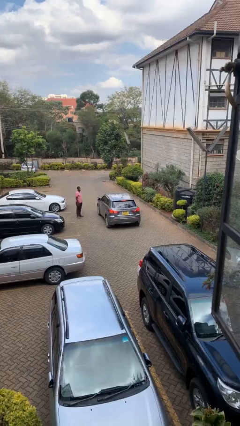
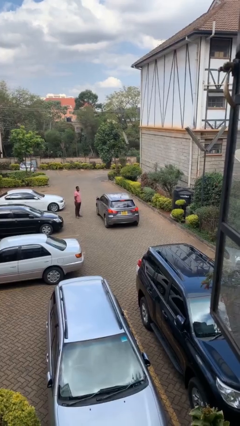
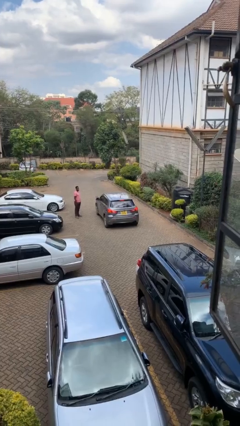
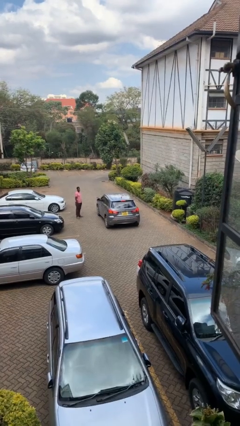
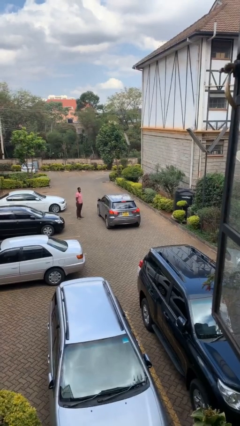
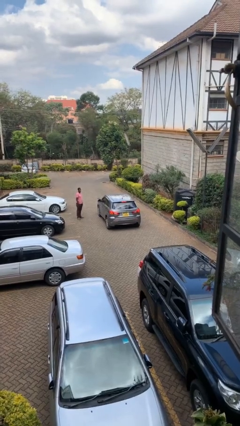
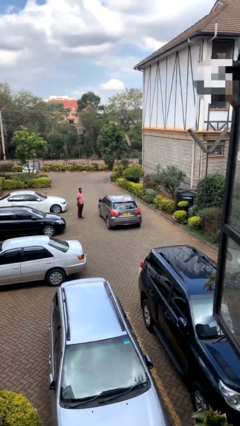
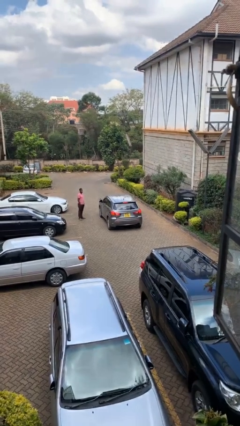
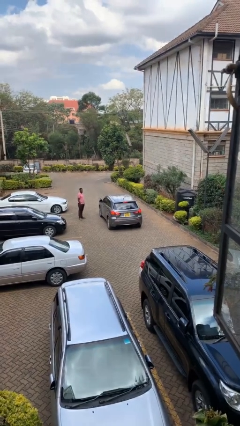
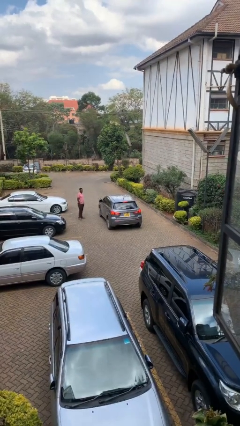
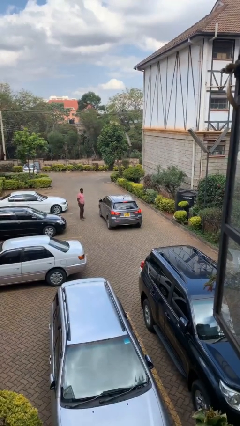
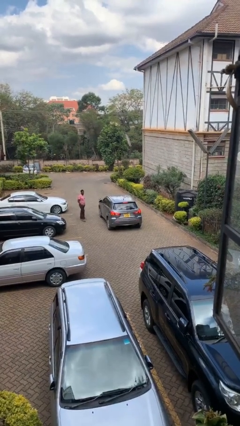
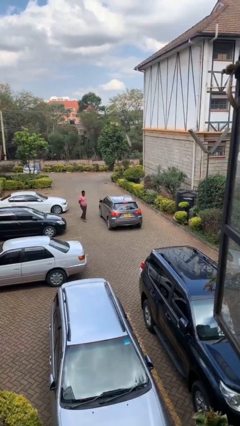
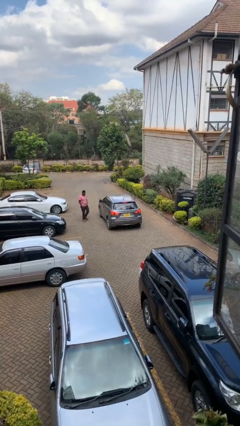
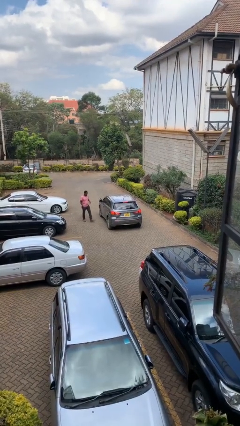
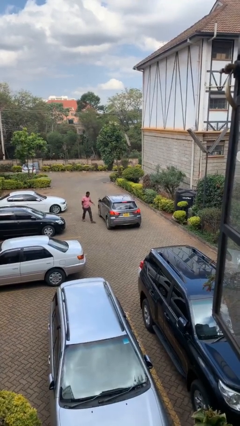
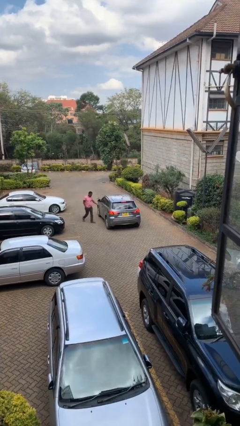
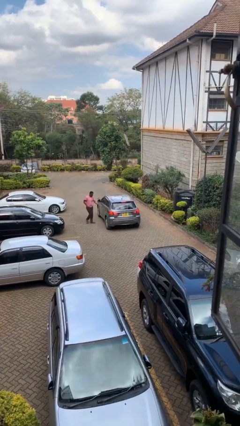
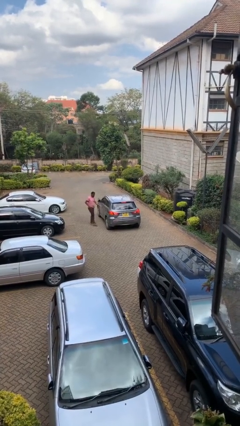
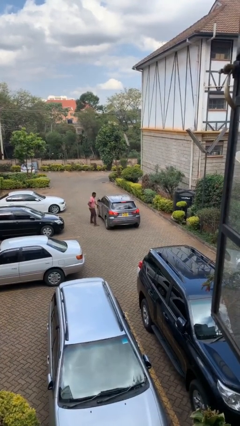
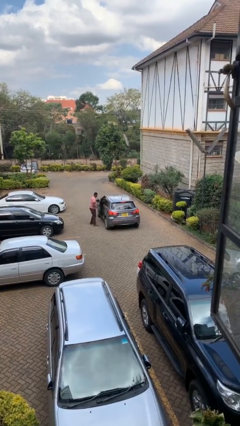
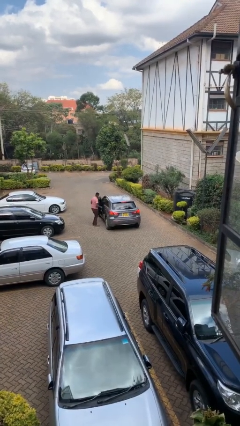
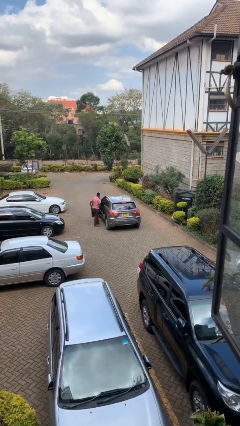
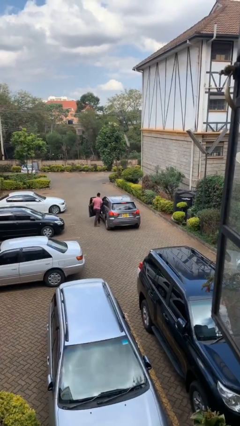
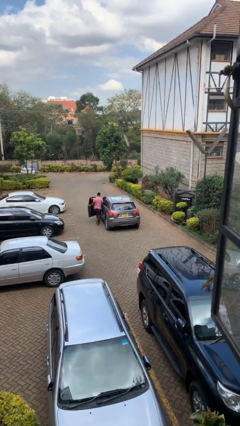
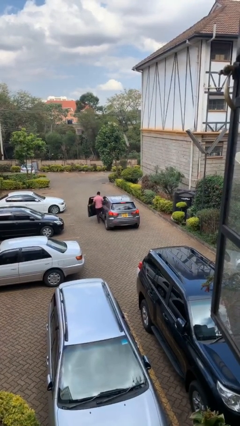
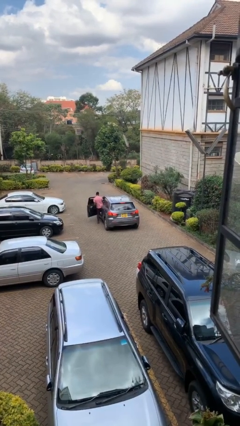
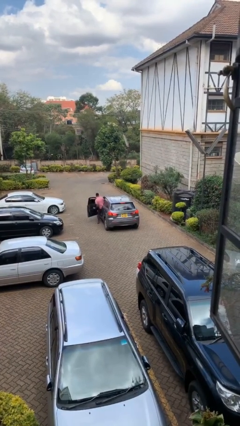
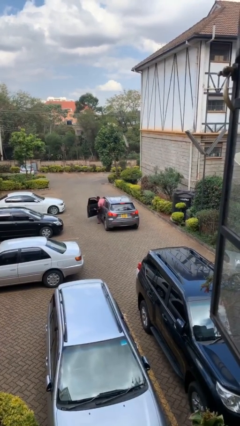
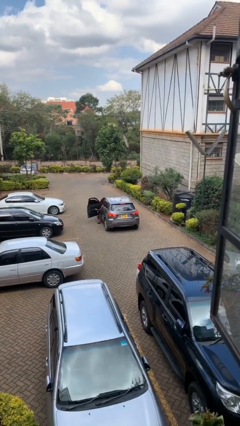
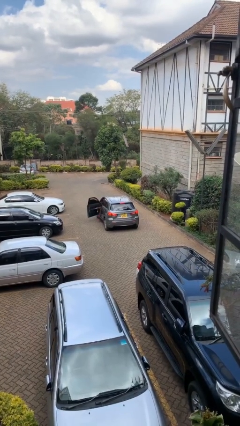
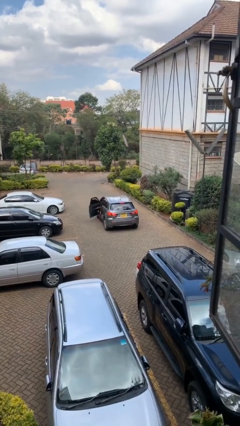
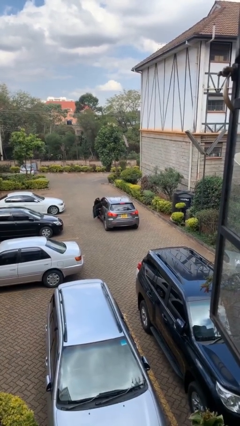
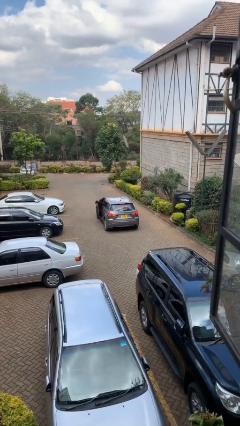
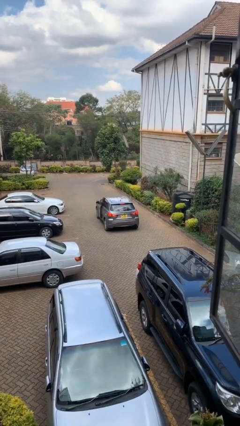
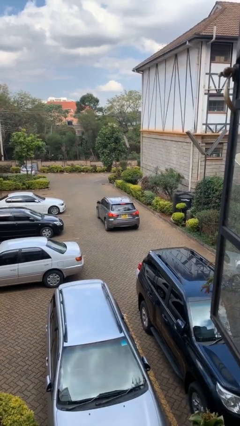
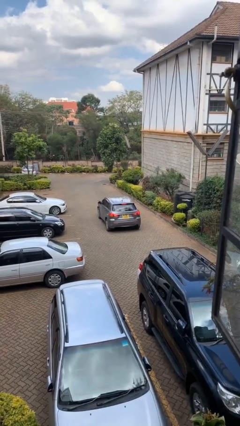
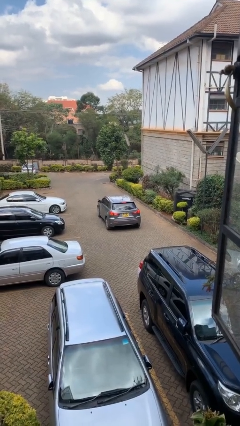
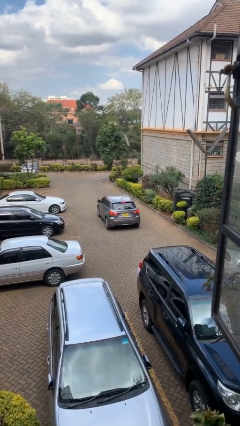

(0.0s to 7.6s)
car picks up person

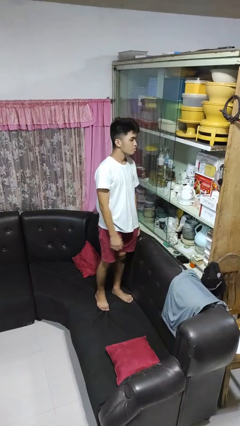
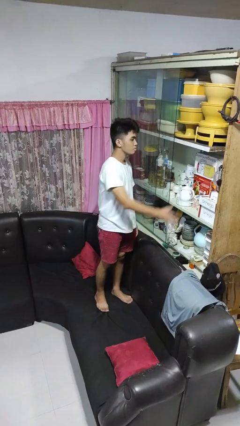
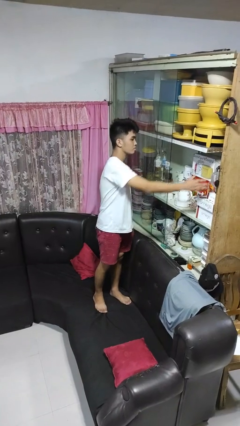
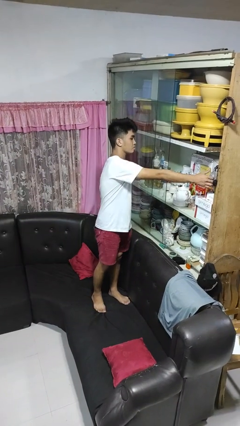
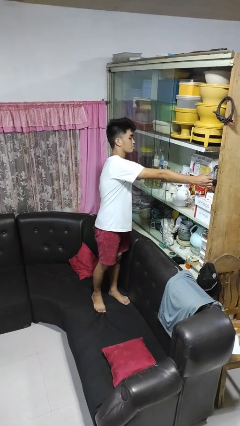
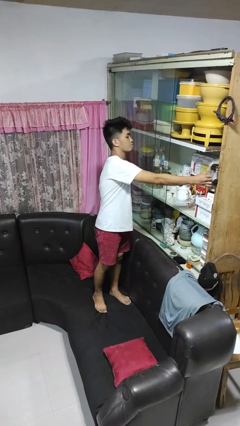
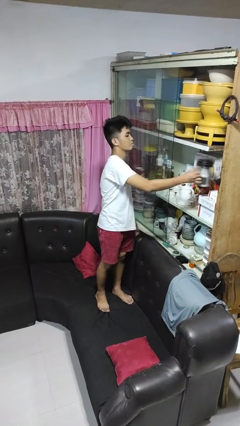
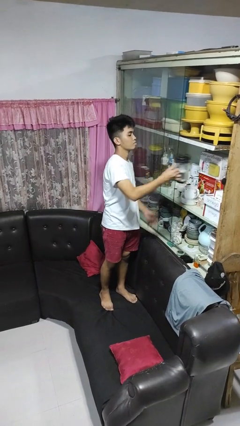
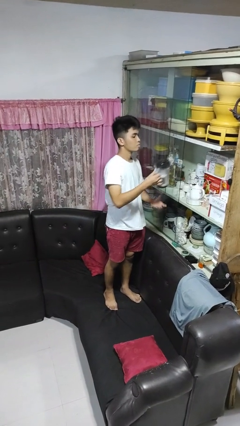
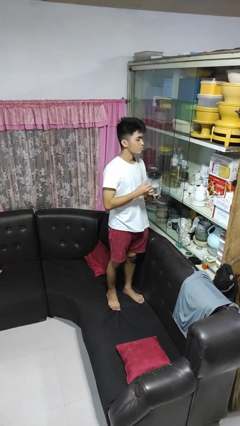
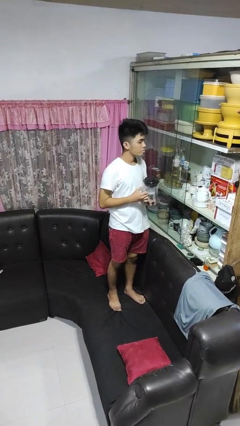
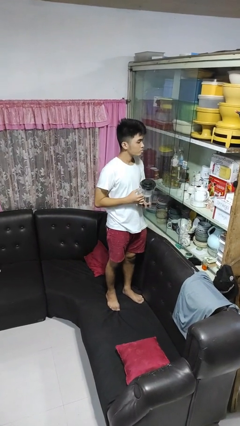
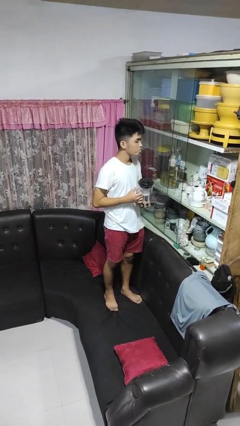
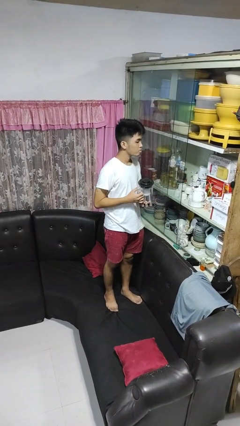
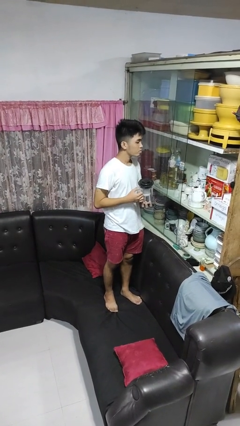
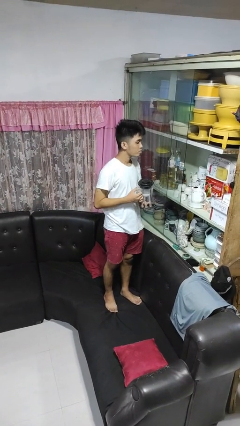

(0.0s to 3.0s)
person picks up object from cabinet

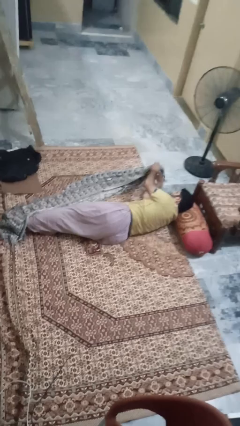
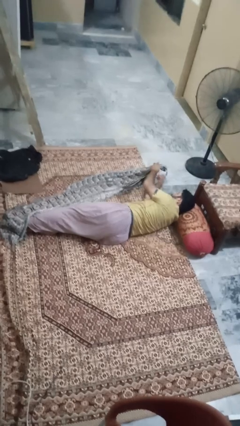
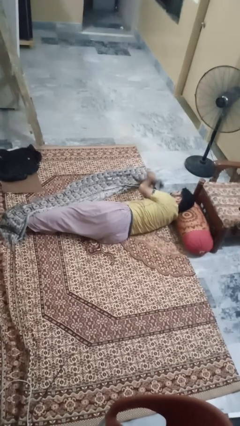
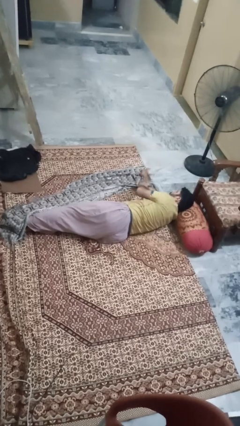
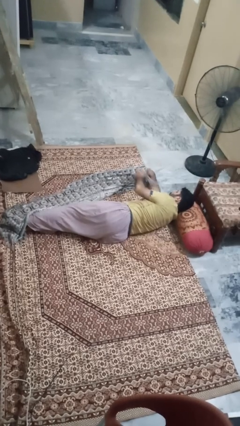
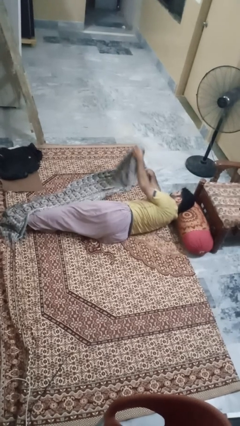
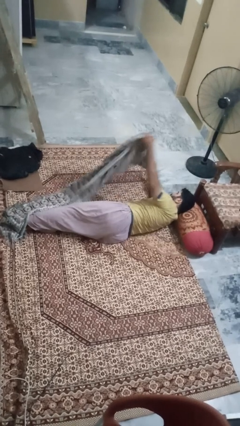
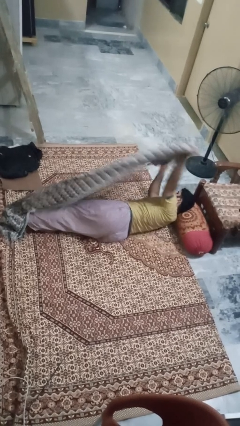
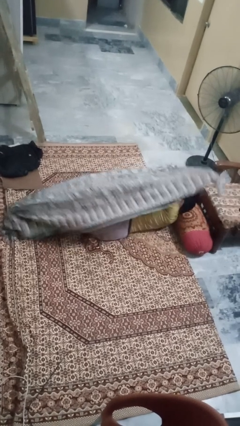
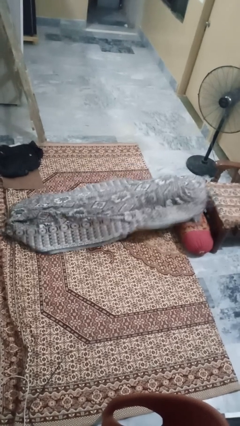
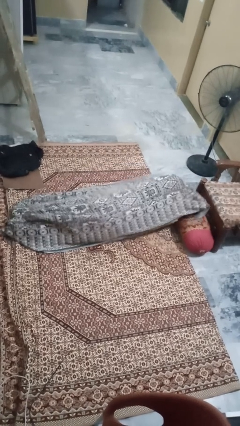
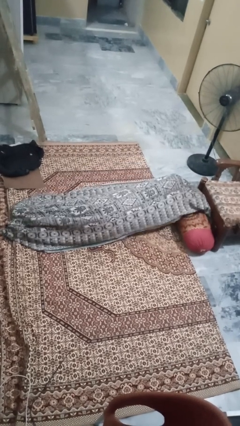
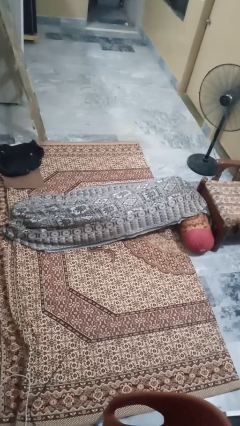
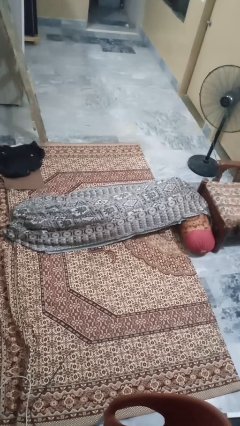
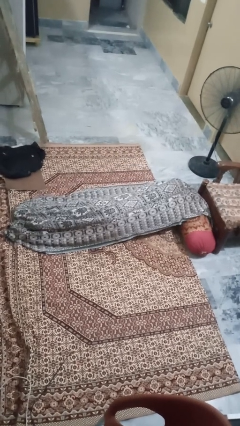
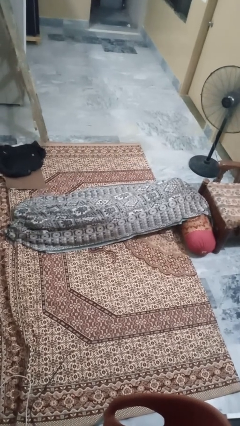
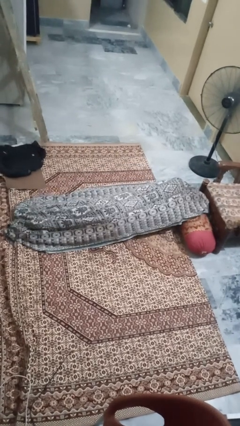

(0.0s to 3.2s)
person covers with blanket

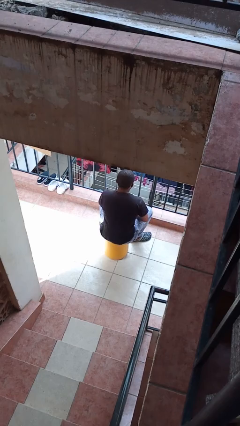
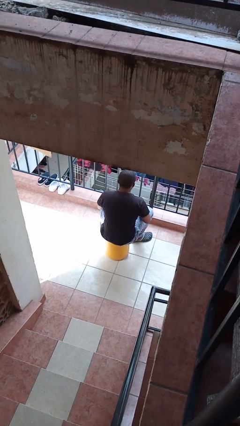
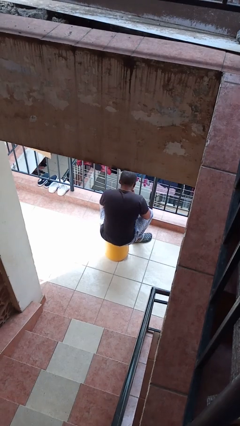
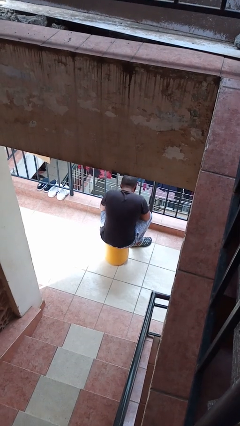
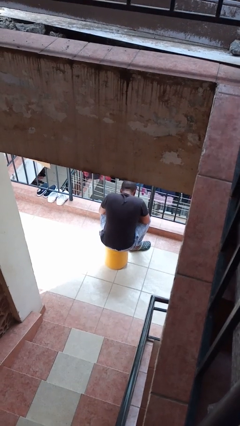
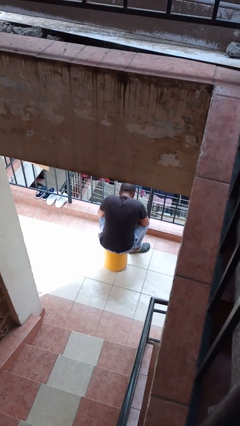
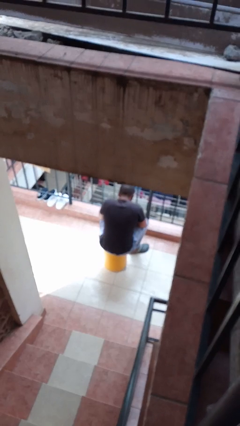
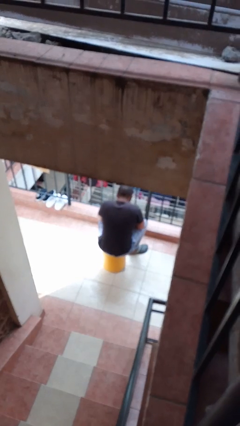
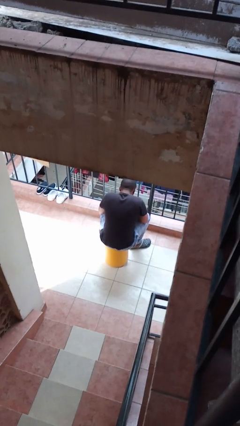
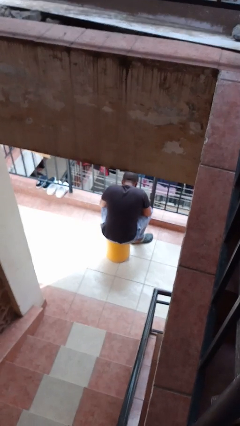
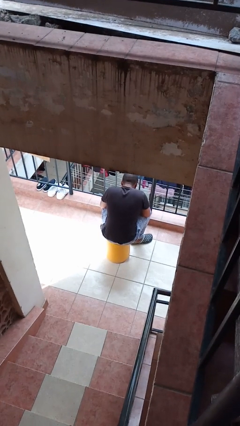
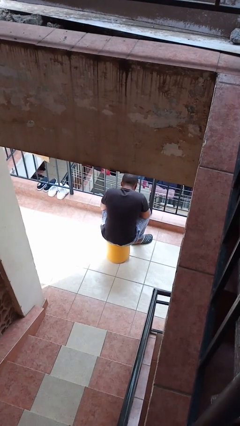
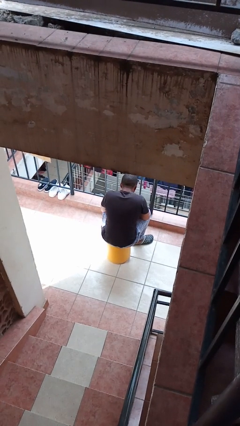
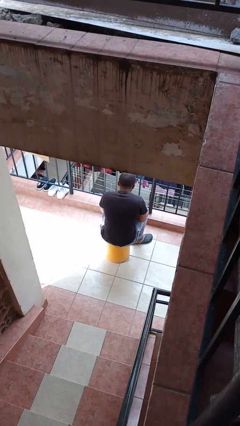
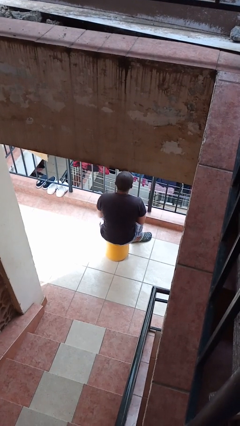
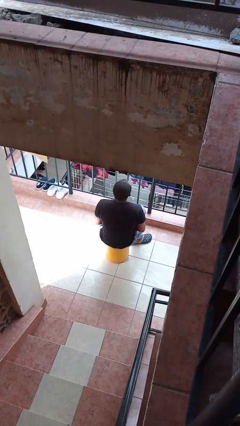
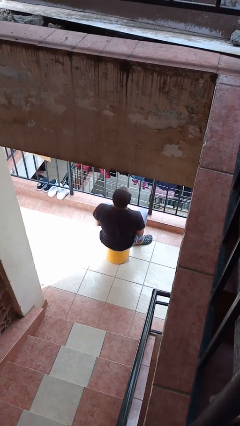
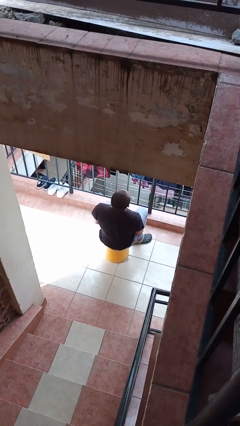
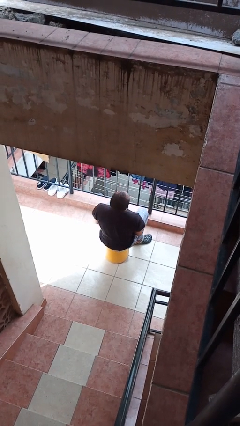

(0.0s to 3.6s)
person blows into hands

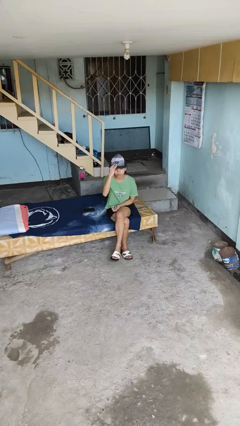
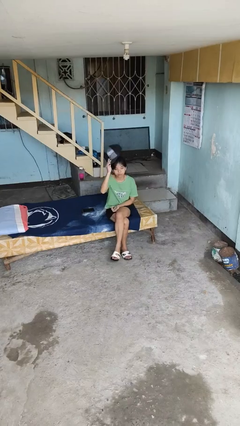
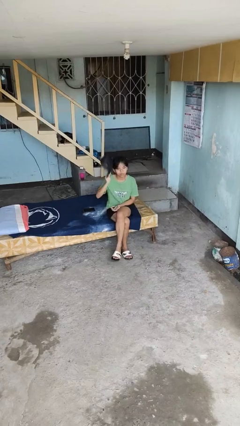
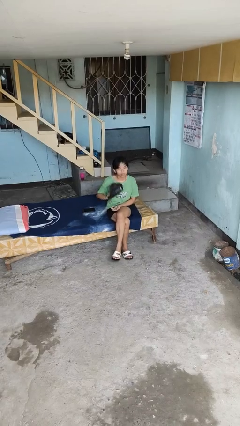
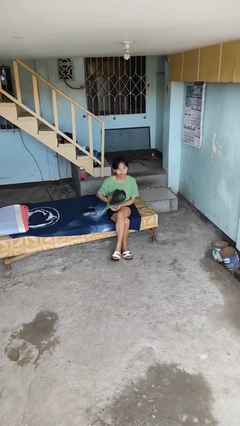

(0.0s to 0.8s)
person takes off hat
